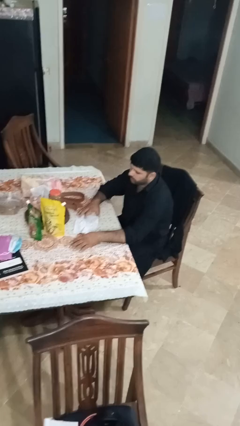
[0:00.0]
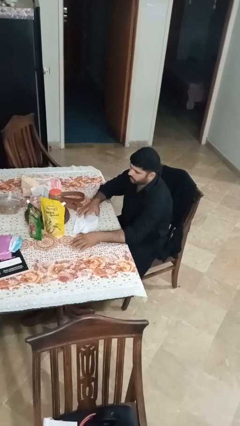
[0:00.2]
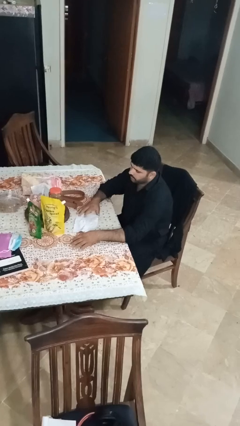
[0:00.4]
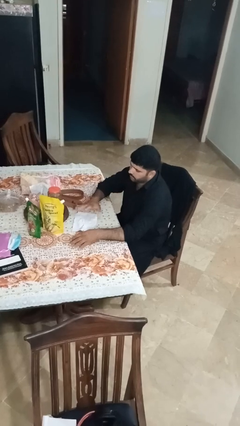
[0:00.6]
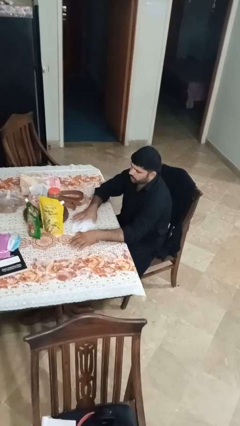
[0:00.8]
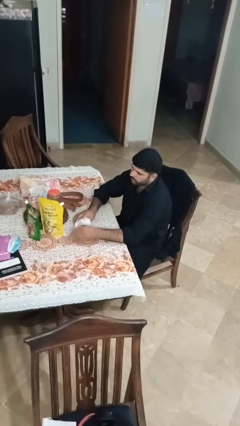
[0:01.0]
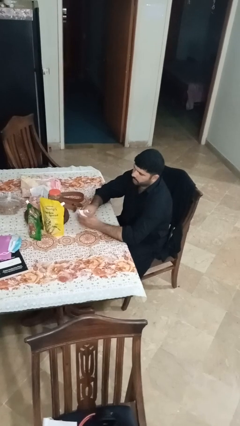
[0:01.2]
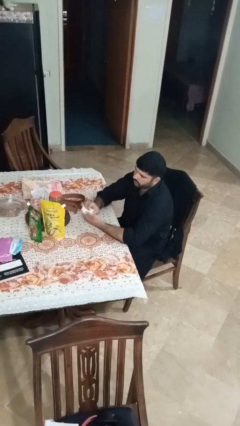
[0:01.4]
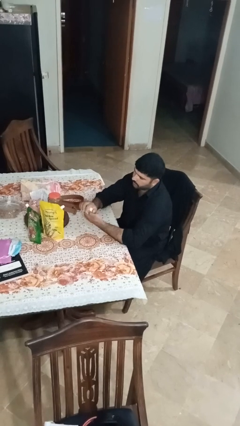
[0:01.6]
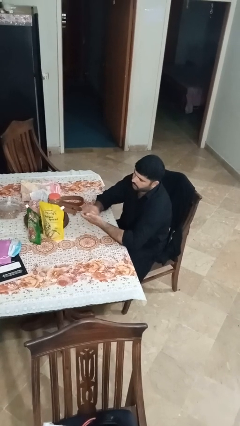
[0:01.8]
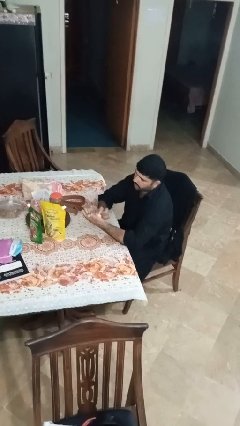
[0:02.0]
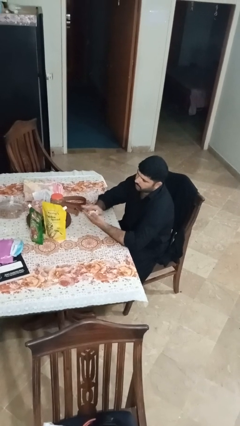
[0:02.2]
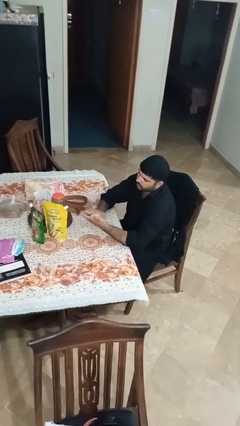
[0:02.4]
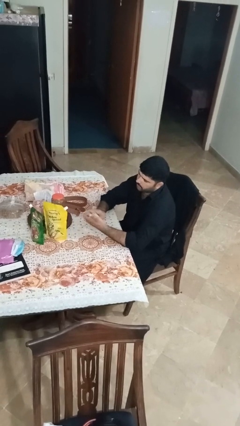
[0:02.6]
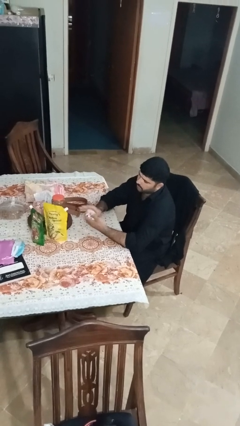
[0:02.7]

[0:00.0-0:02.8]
person crumples paper

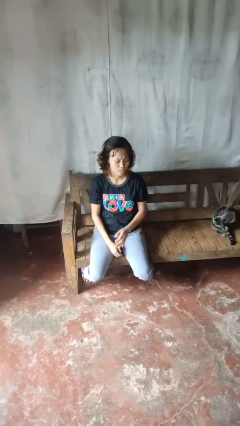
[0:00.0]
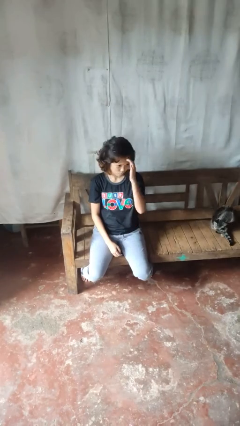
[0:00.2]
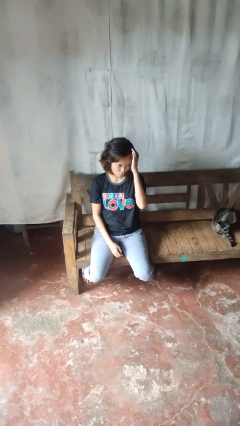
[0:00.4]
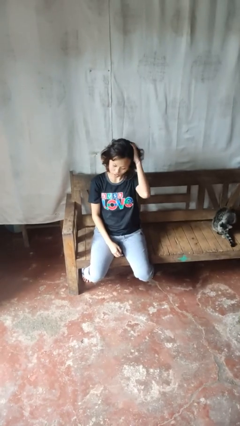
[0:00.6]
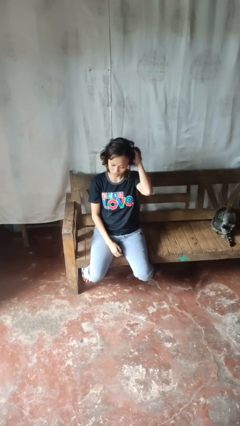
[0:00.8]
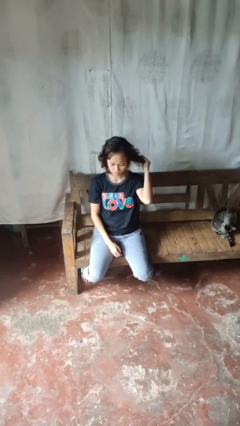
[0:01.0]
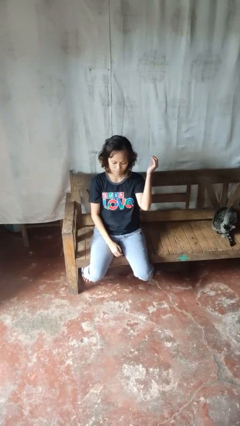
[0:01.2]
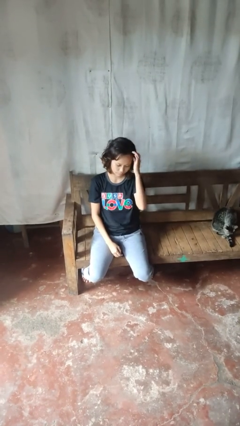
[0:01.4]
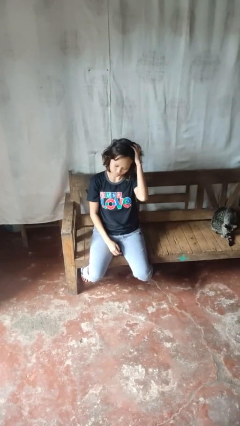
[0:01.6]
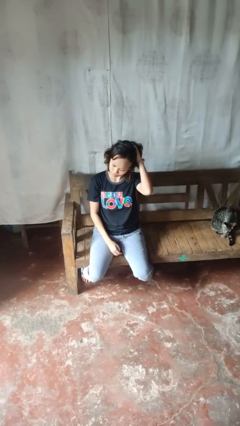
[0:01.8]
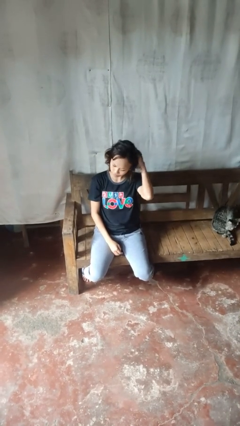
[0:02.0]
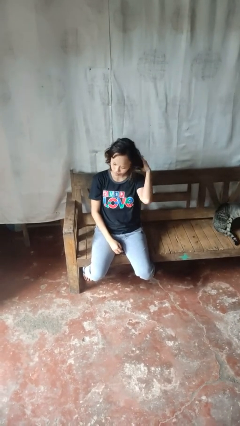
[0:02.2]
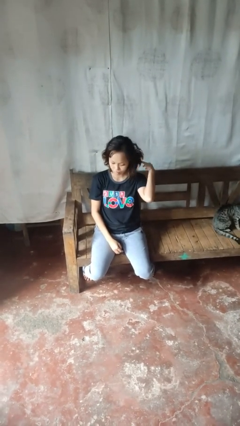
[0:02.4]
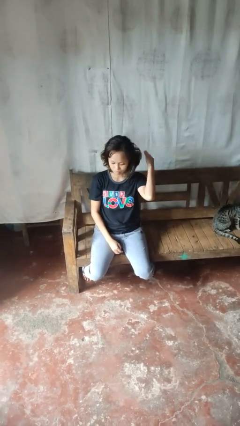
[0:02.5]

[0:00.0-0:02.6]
person strokes hair

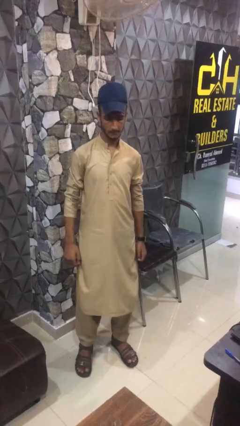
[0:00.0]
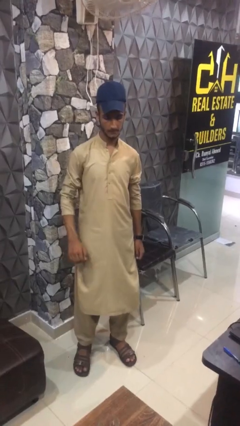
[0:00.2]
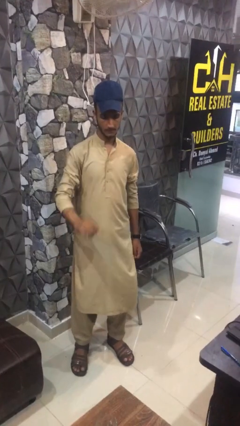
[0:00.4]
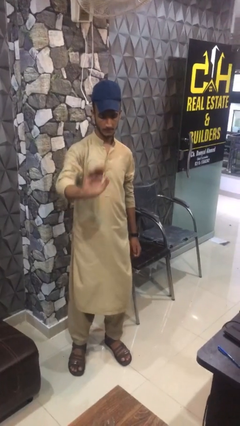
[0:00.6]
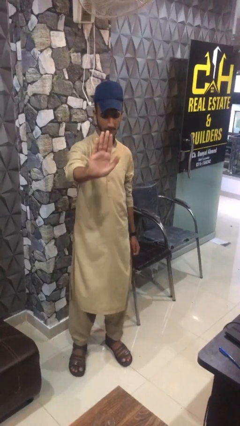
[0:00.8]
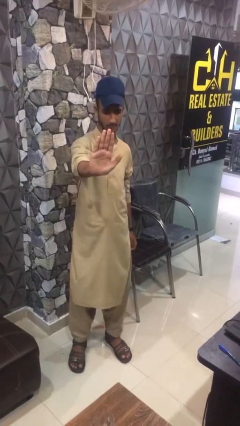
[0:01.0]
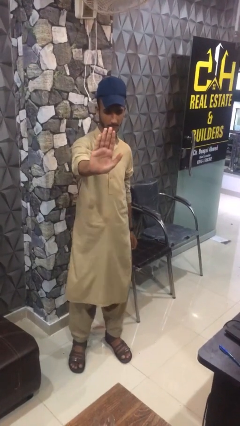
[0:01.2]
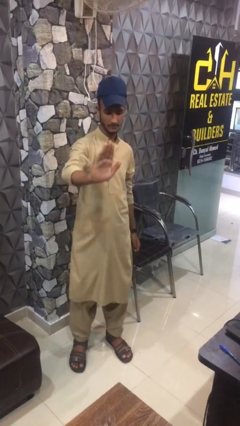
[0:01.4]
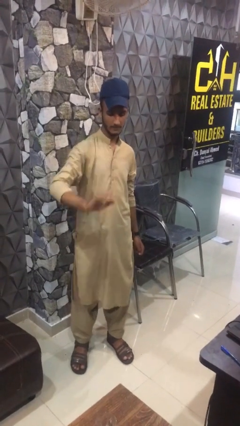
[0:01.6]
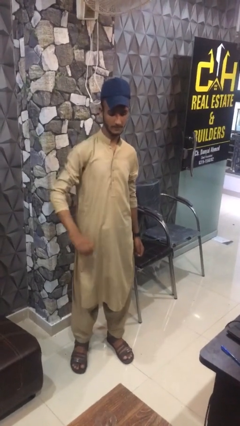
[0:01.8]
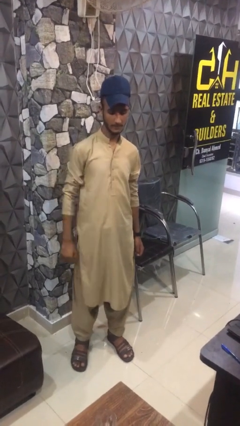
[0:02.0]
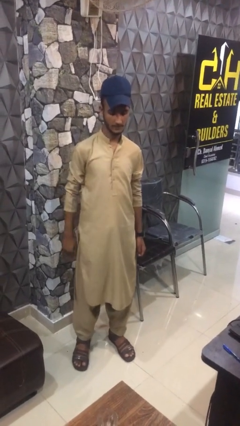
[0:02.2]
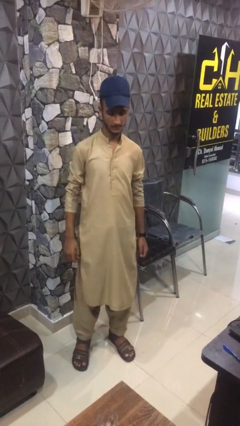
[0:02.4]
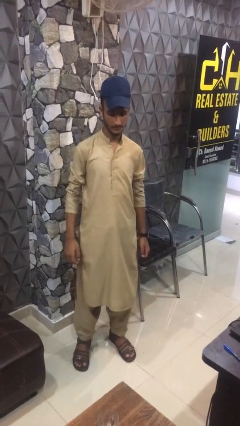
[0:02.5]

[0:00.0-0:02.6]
person gestures stop

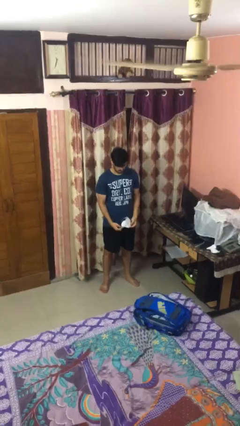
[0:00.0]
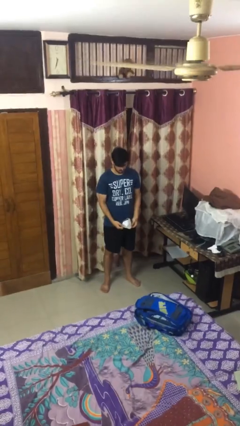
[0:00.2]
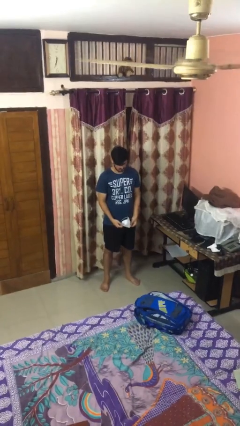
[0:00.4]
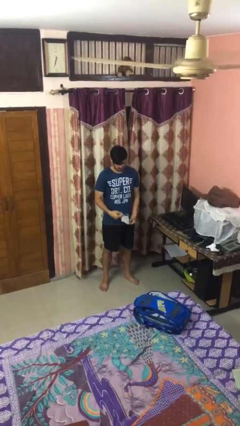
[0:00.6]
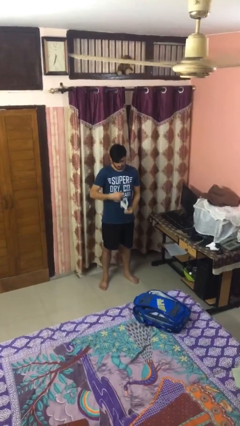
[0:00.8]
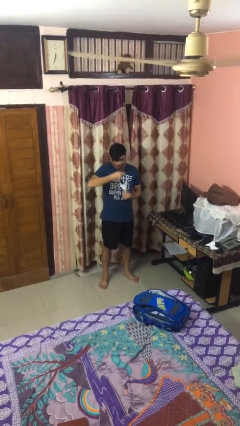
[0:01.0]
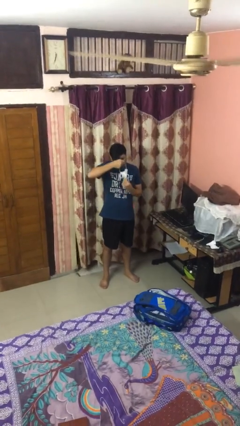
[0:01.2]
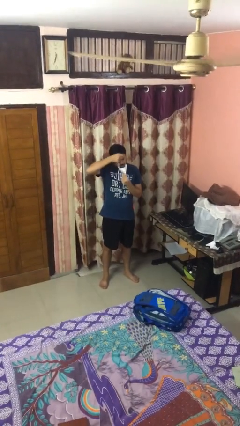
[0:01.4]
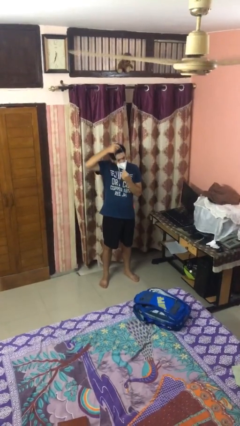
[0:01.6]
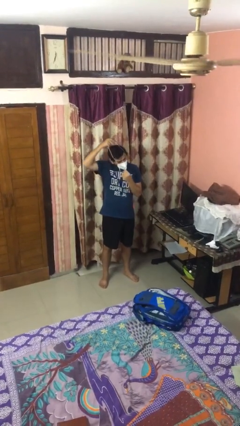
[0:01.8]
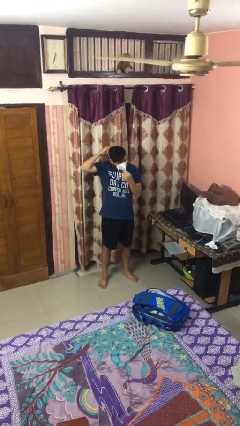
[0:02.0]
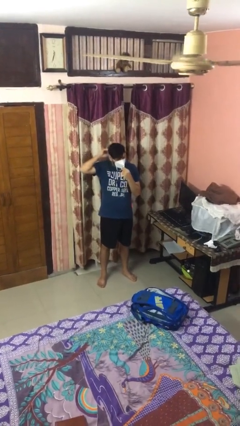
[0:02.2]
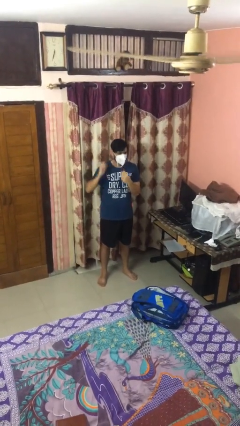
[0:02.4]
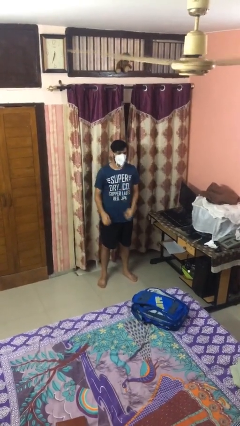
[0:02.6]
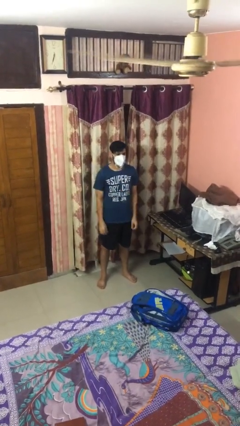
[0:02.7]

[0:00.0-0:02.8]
person puts on facemask

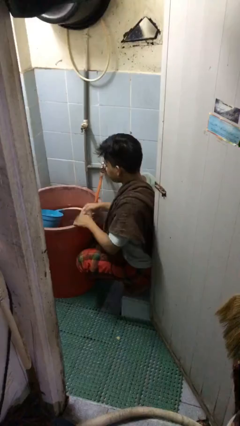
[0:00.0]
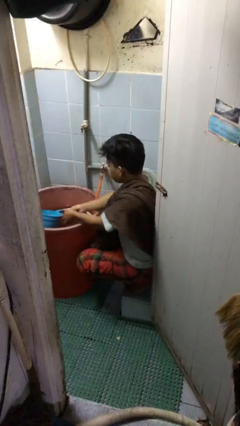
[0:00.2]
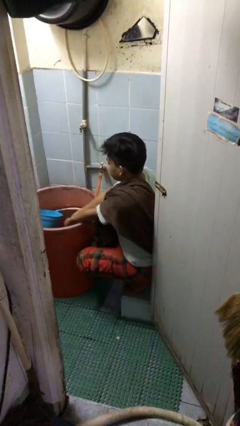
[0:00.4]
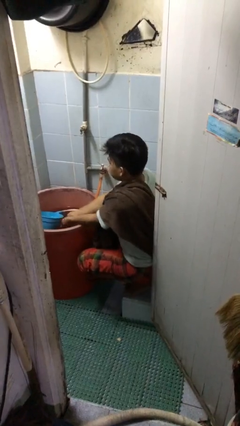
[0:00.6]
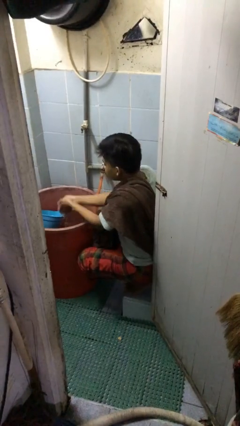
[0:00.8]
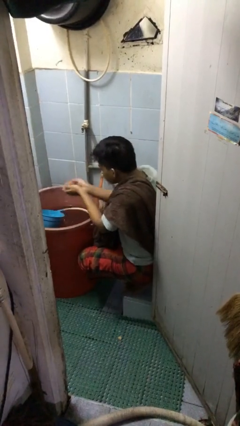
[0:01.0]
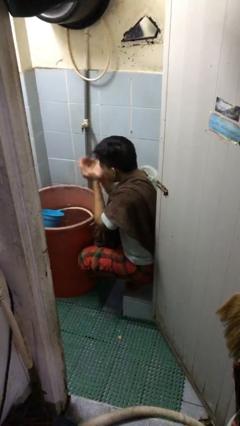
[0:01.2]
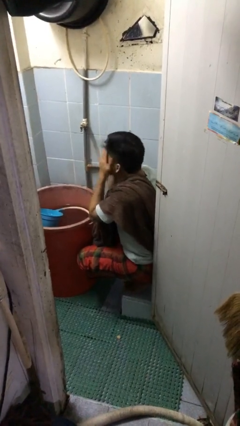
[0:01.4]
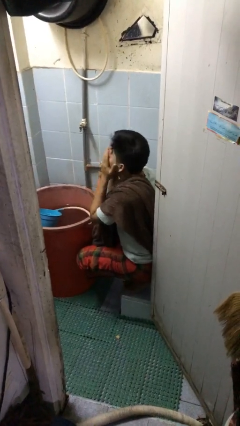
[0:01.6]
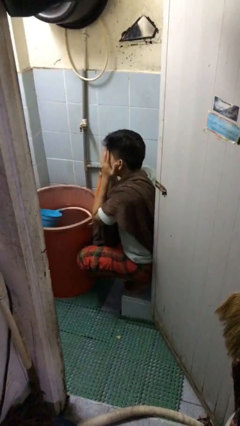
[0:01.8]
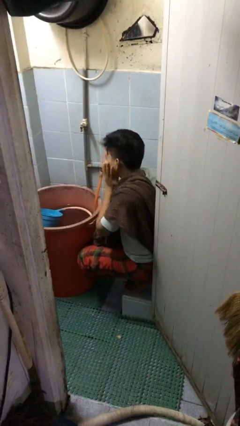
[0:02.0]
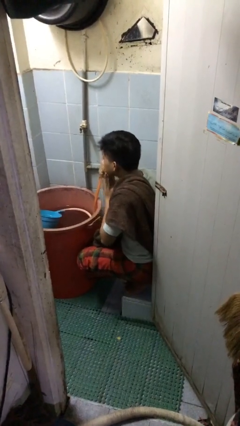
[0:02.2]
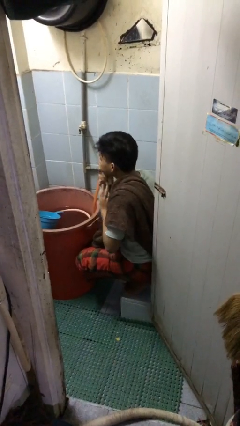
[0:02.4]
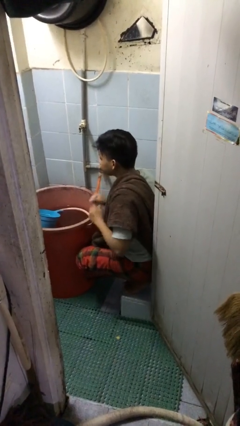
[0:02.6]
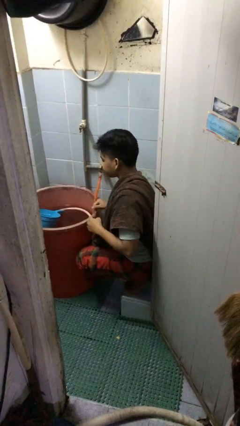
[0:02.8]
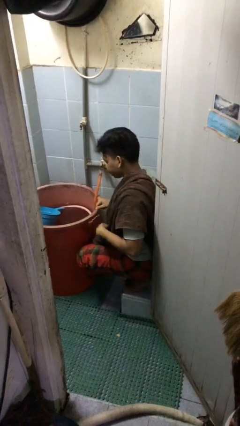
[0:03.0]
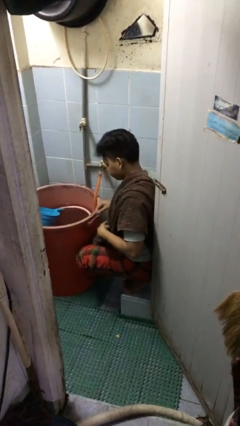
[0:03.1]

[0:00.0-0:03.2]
person washes face

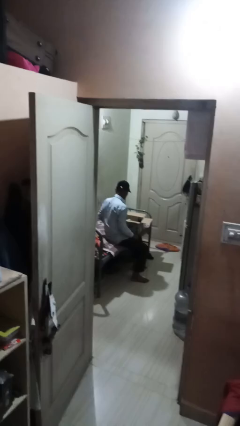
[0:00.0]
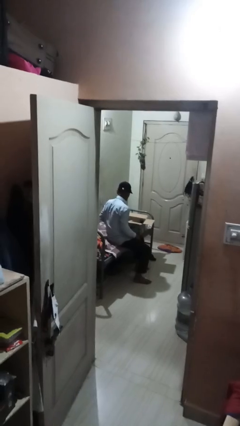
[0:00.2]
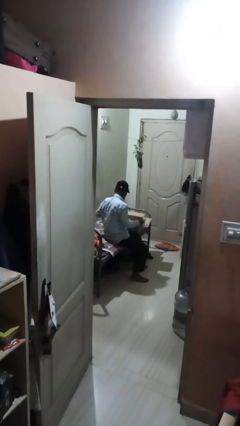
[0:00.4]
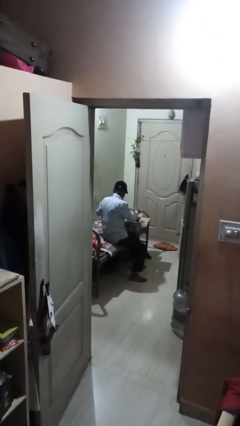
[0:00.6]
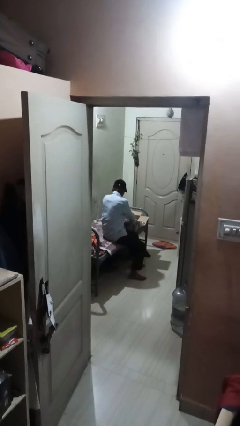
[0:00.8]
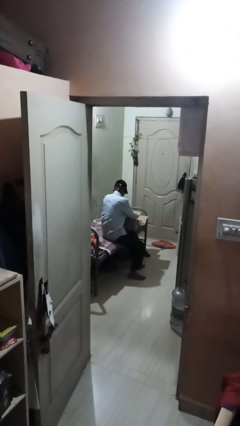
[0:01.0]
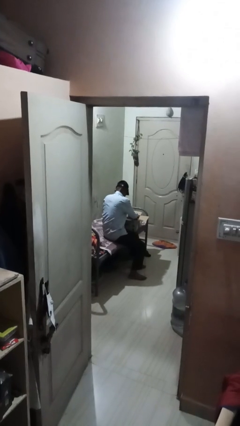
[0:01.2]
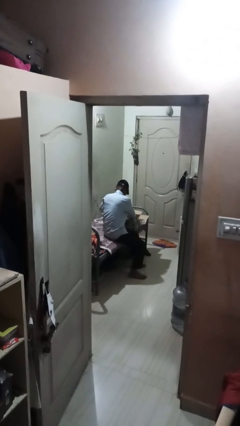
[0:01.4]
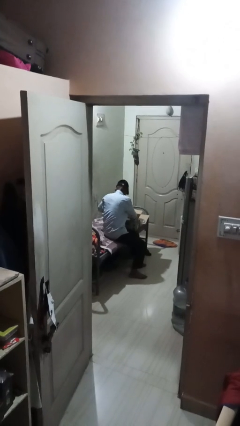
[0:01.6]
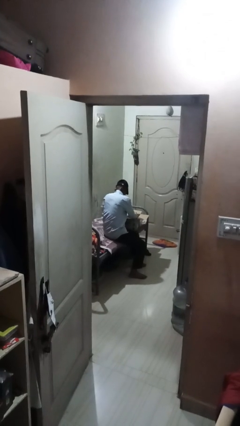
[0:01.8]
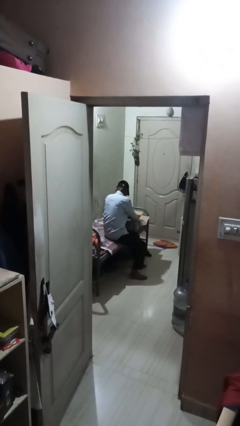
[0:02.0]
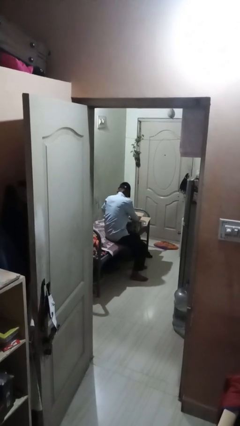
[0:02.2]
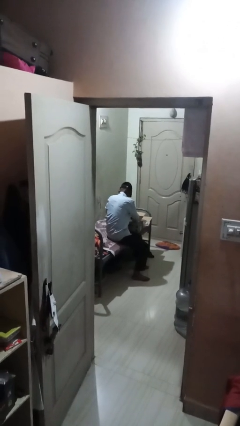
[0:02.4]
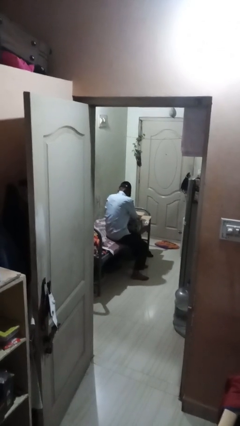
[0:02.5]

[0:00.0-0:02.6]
person searches in box

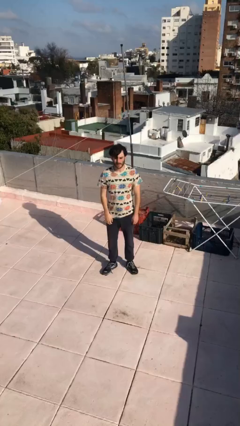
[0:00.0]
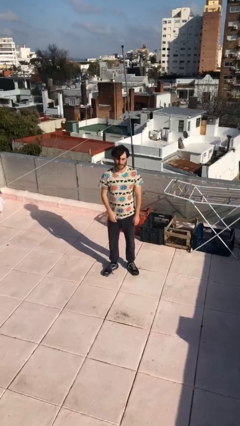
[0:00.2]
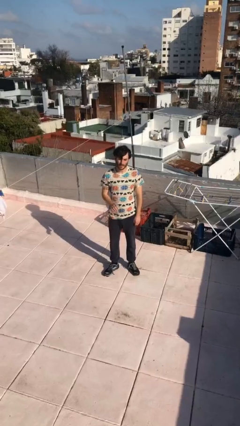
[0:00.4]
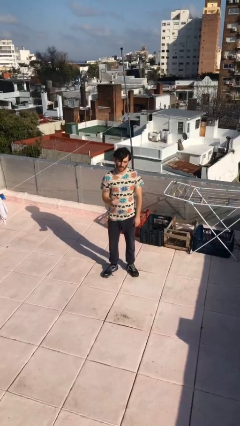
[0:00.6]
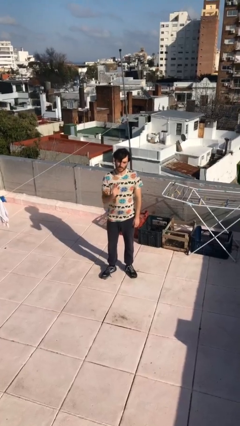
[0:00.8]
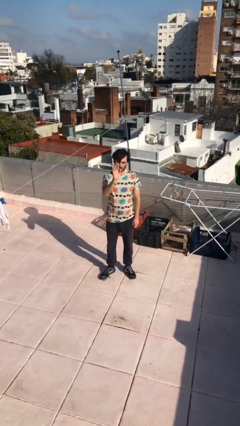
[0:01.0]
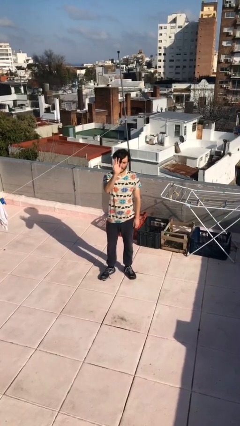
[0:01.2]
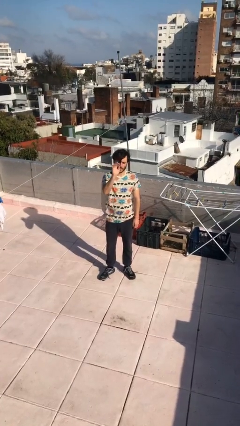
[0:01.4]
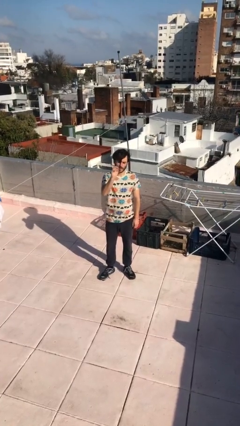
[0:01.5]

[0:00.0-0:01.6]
person gestures swipe up
